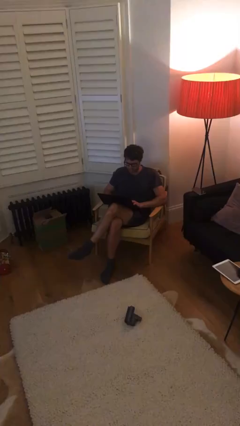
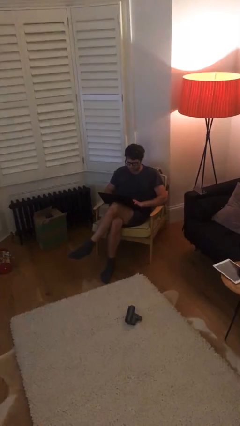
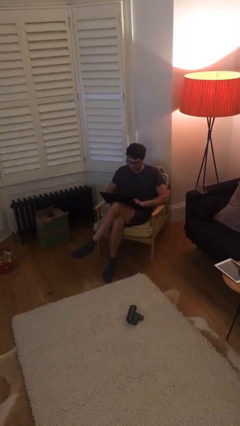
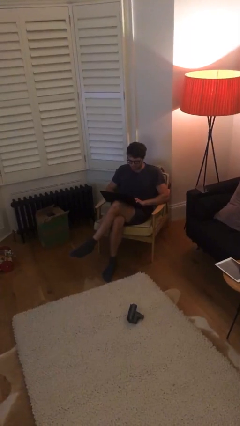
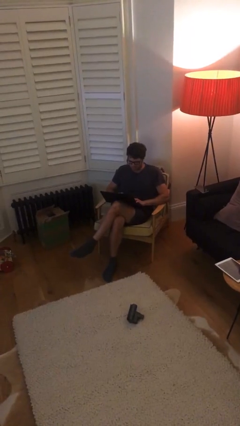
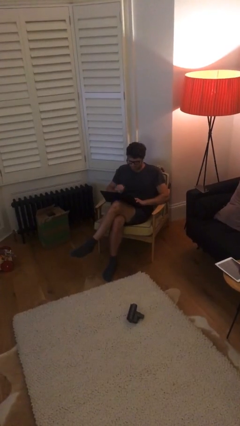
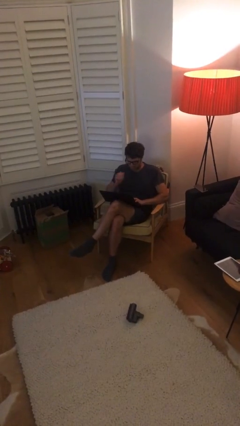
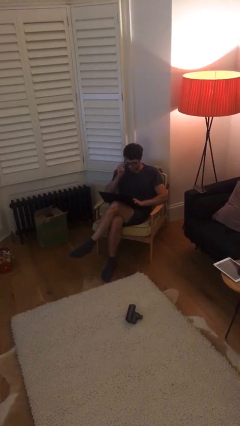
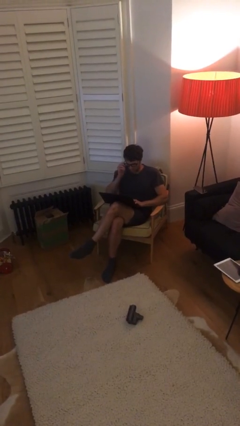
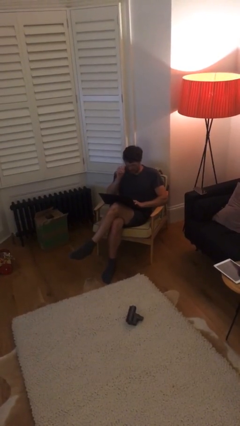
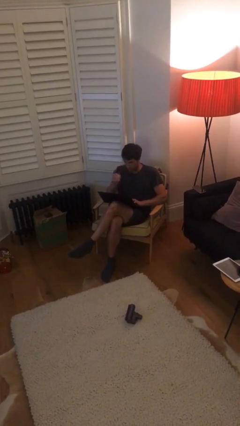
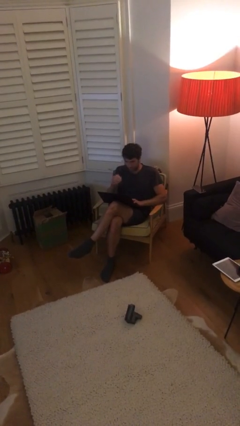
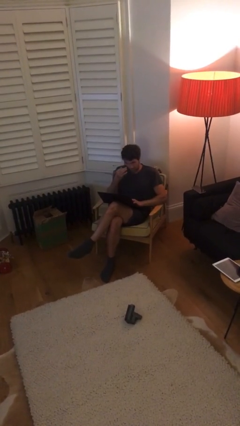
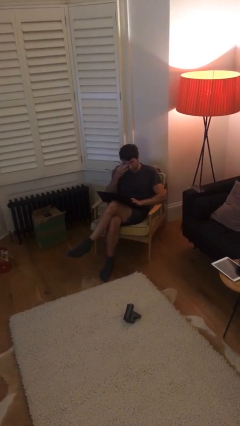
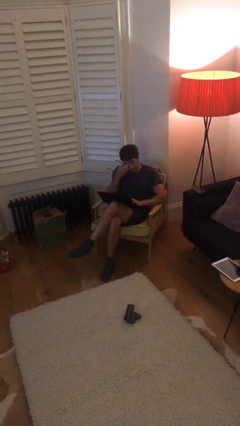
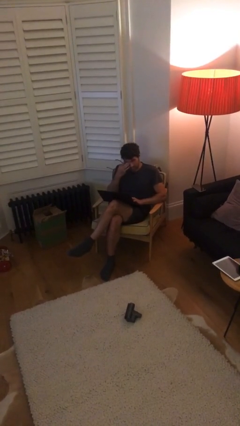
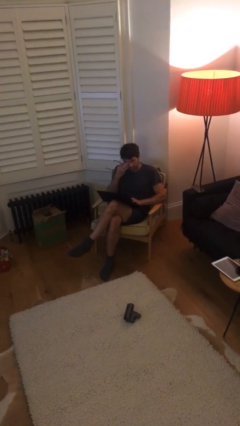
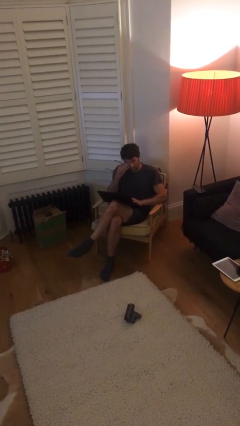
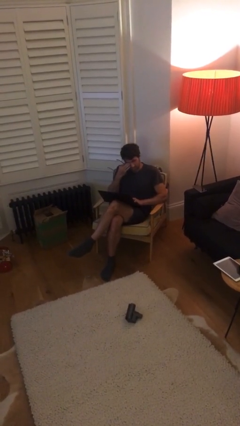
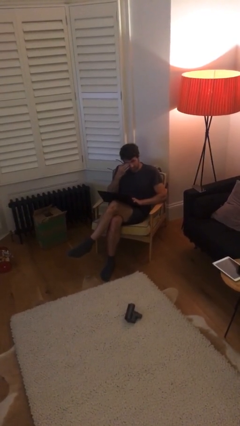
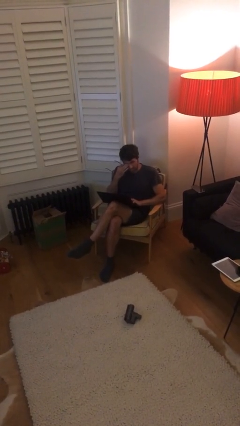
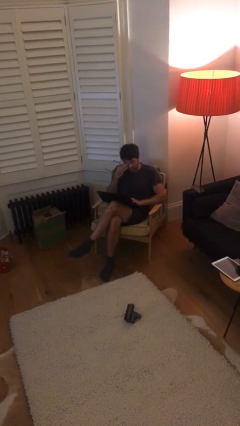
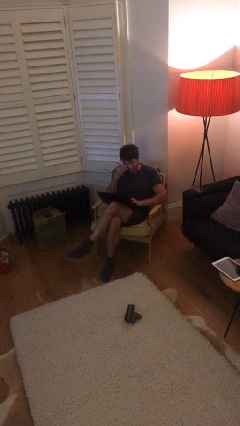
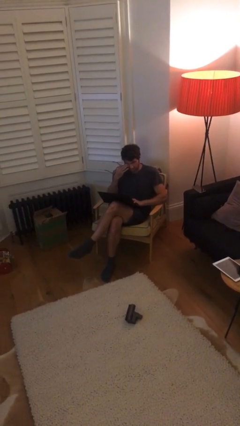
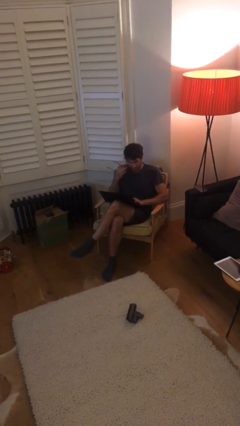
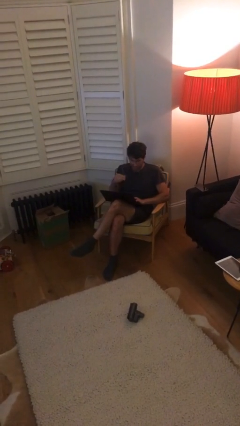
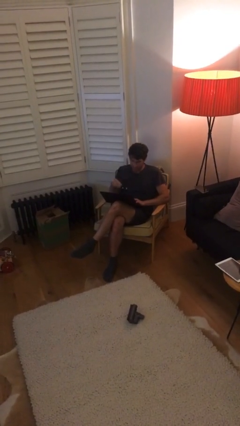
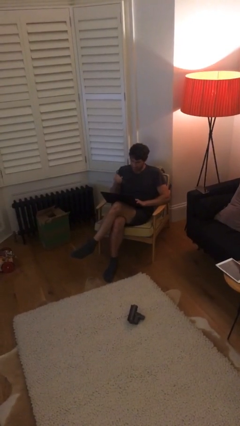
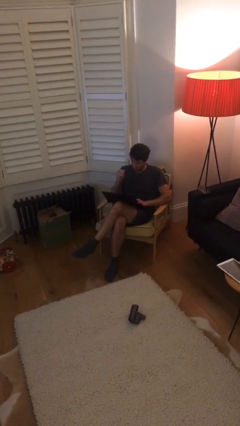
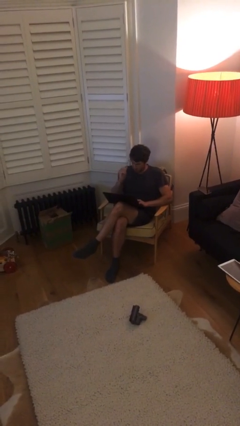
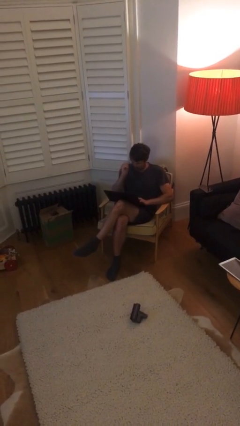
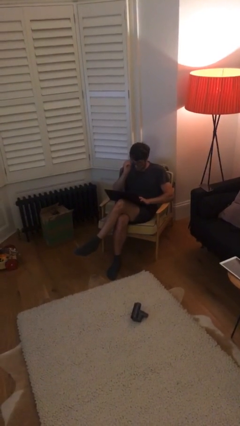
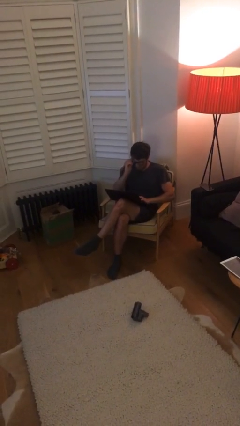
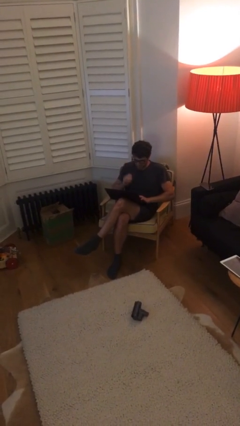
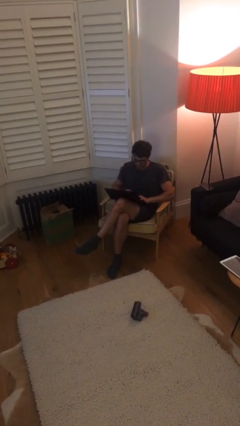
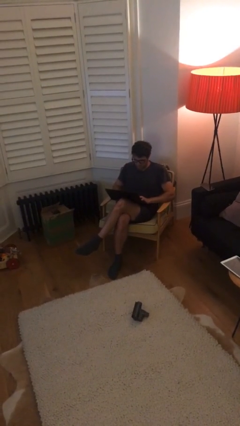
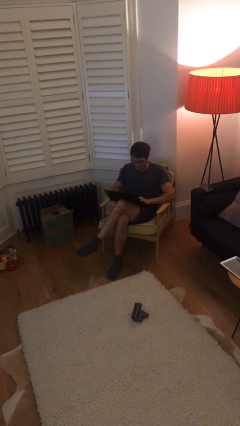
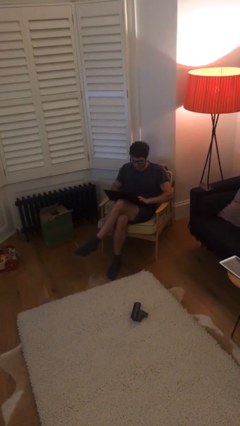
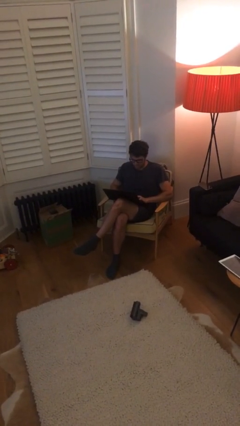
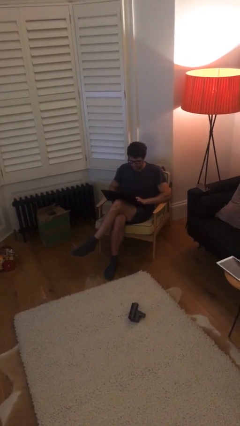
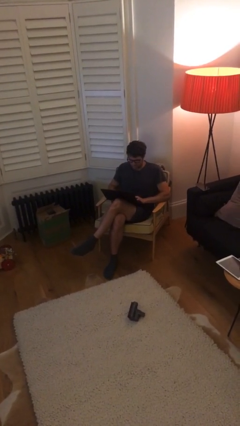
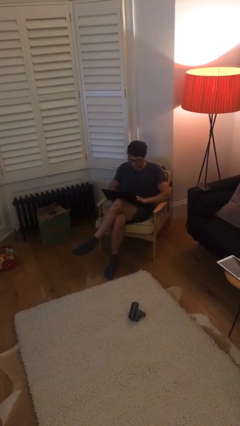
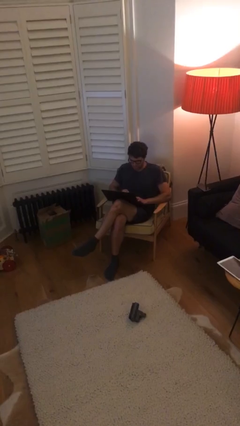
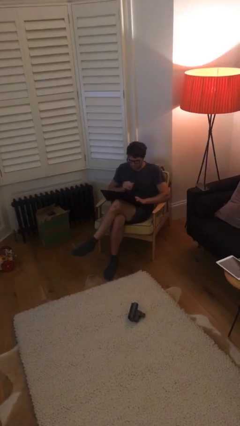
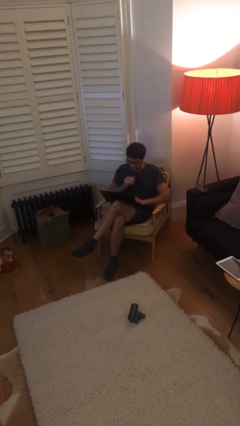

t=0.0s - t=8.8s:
person interacts with laptop

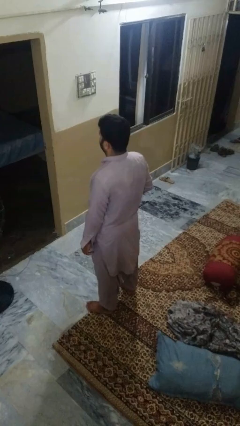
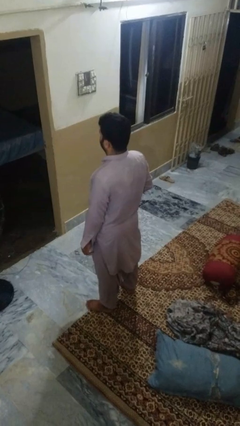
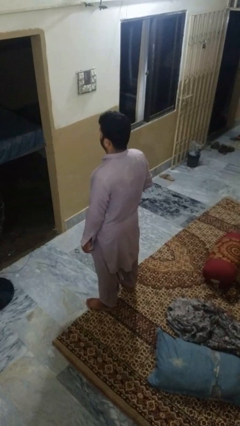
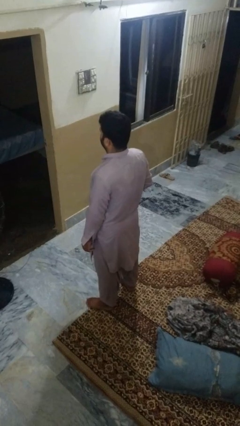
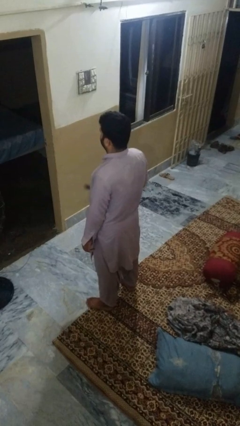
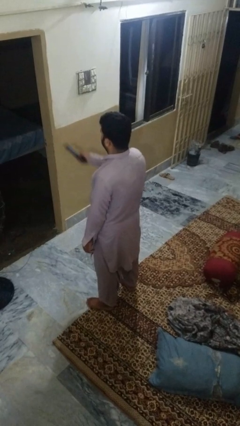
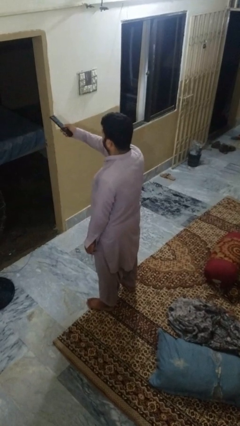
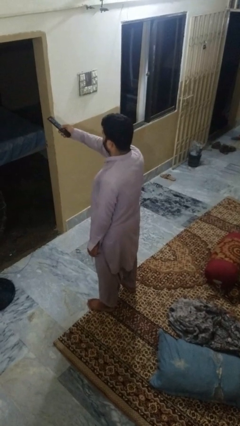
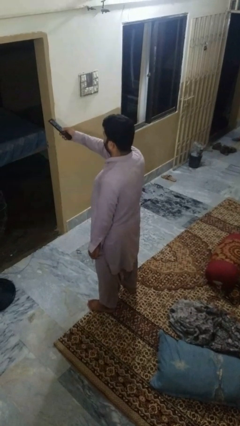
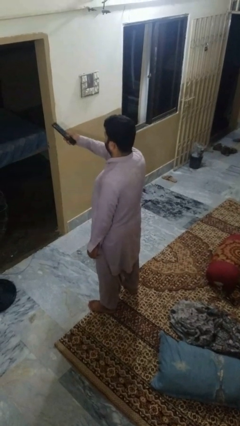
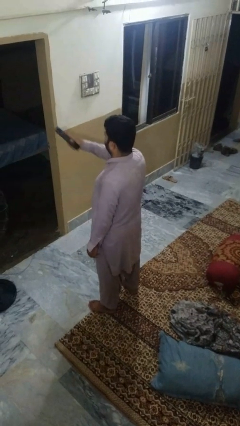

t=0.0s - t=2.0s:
person uses television remote

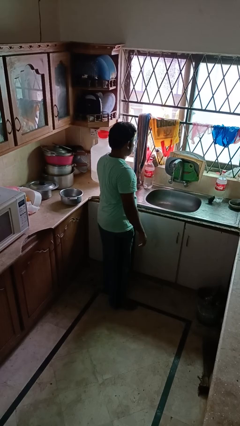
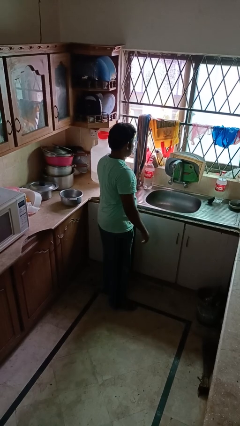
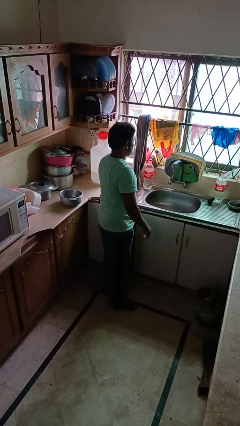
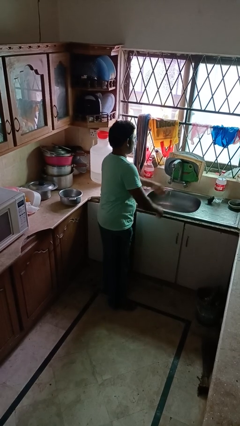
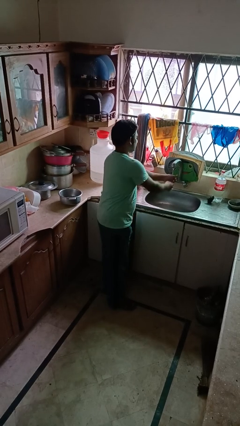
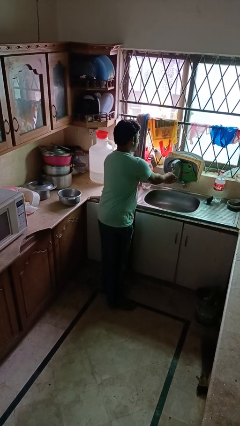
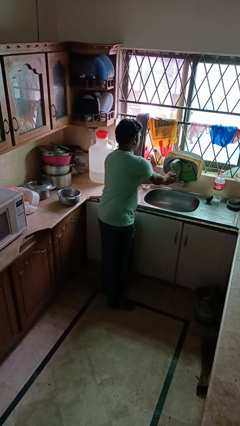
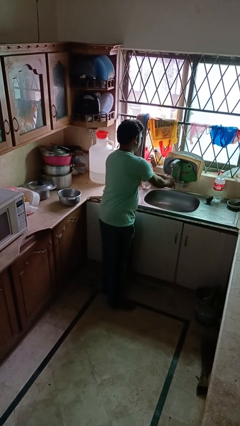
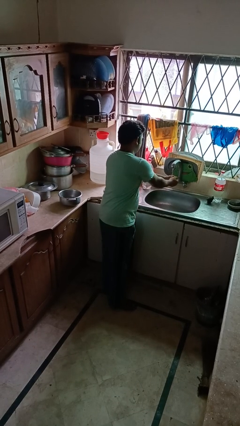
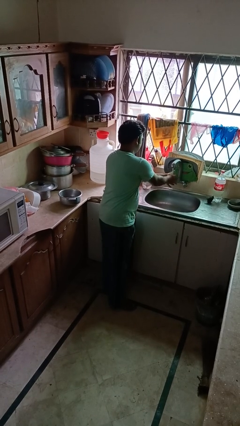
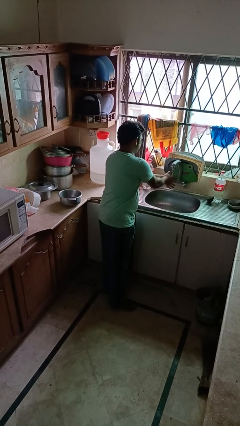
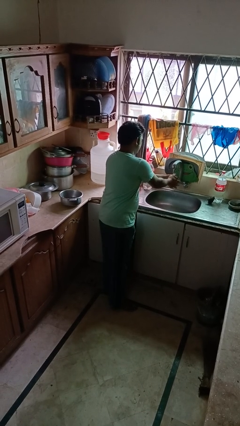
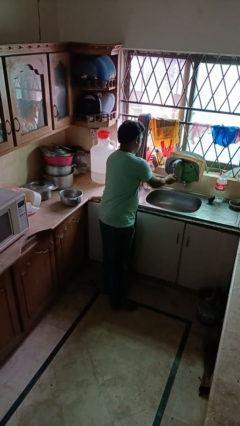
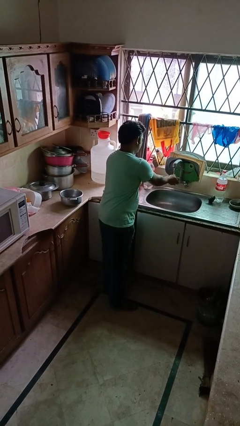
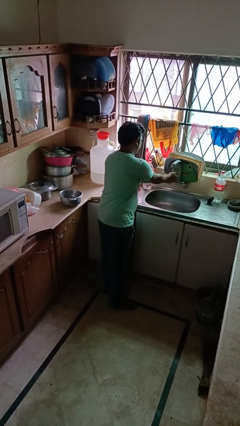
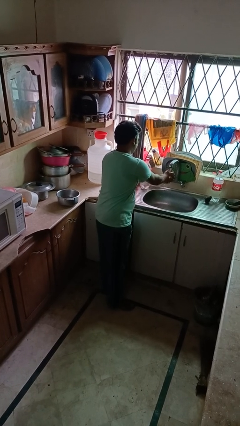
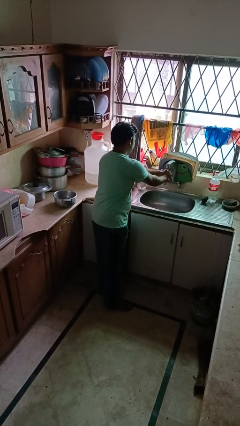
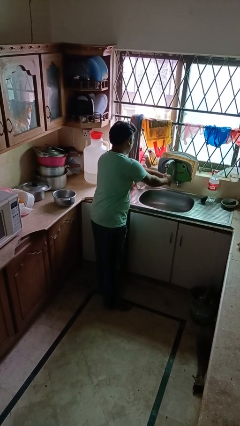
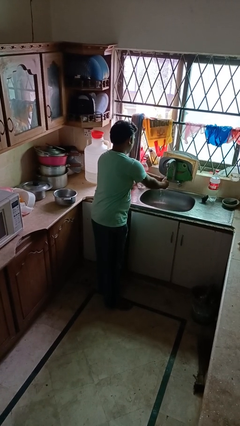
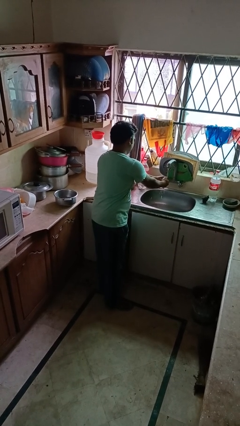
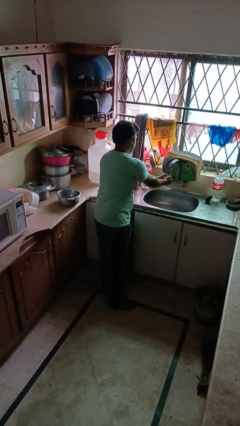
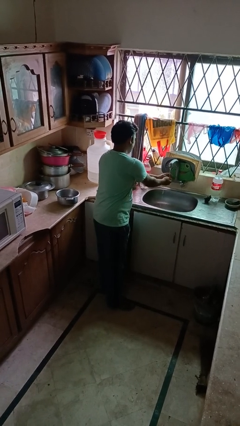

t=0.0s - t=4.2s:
person washes hands

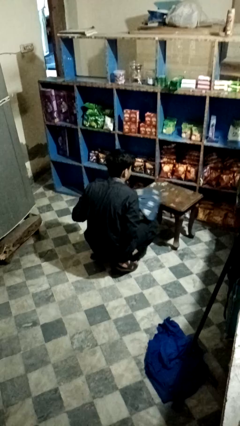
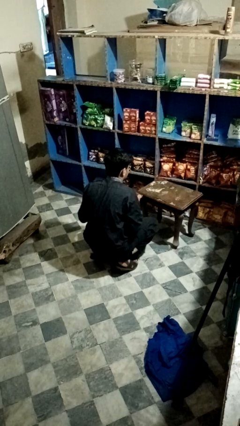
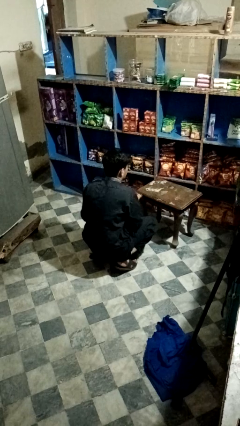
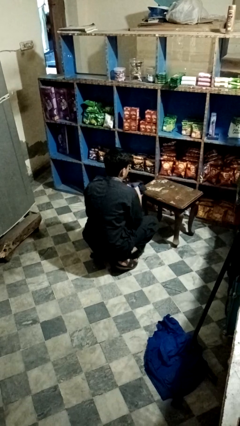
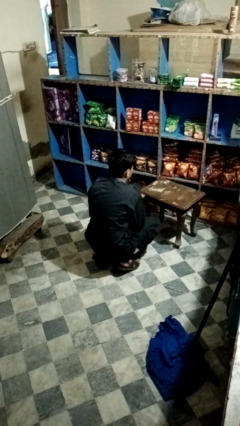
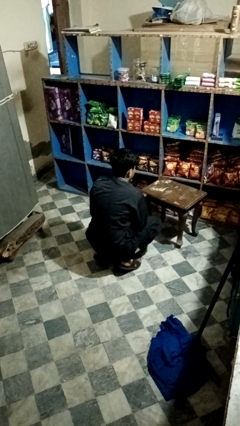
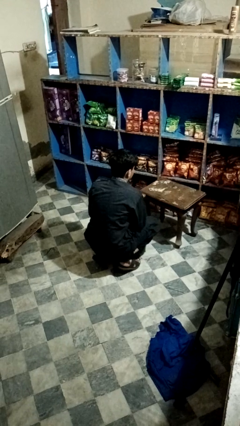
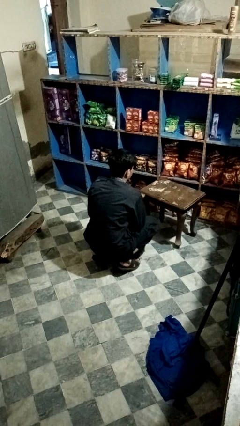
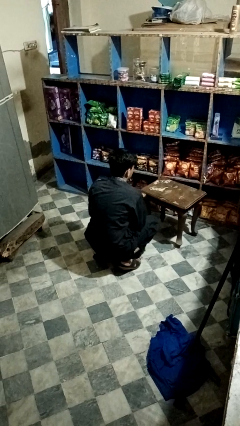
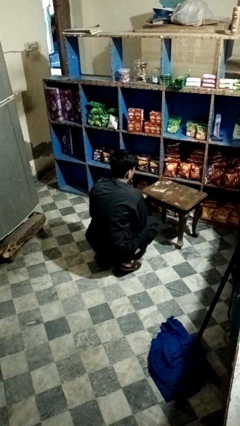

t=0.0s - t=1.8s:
person folds tablecloth

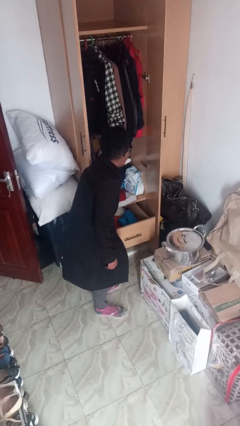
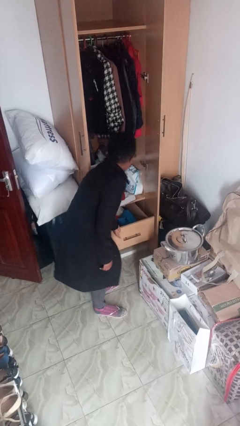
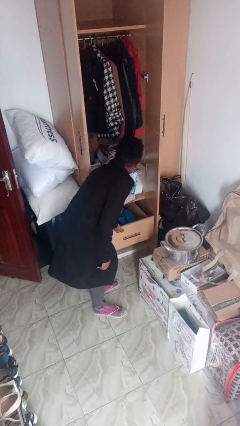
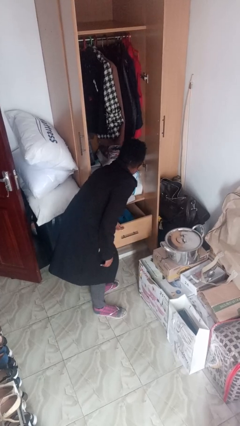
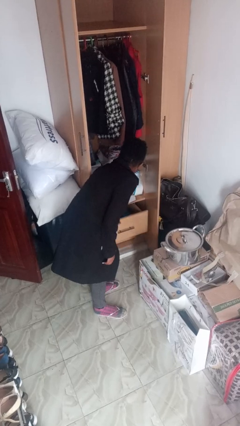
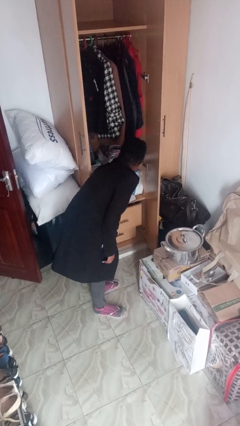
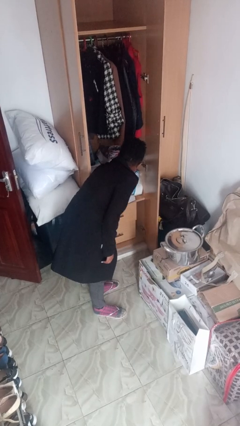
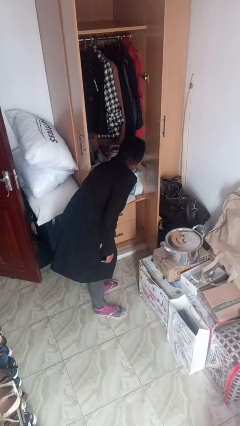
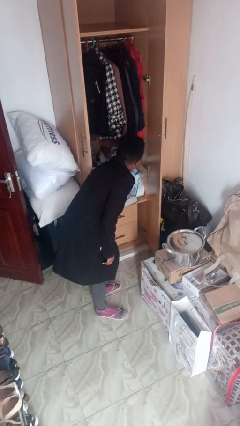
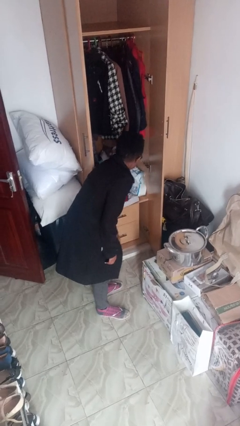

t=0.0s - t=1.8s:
person closes dresser drawer
